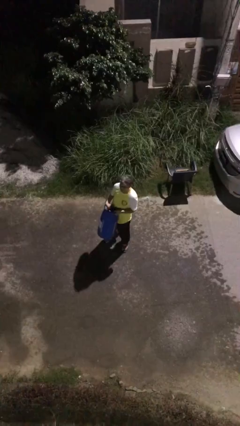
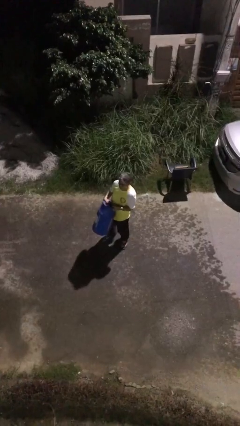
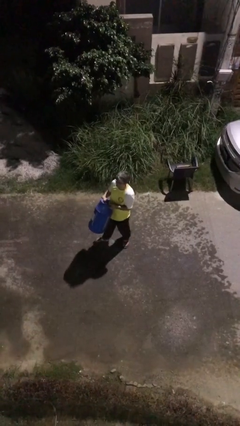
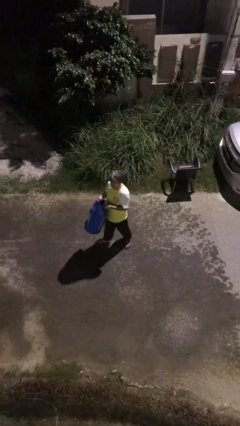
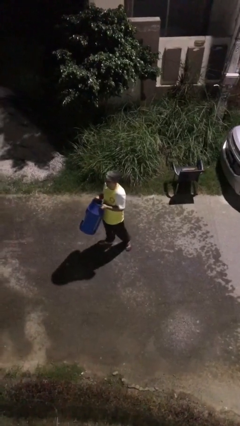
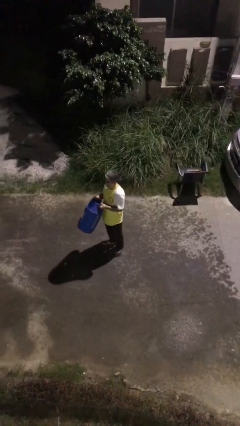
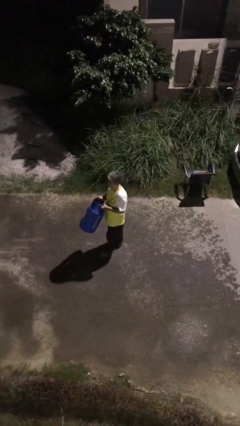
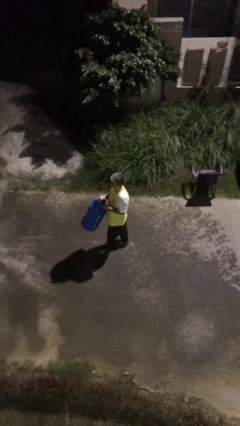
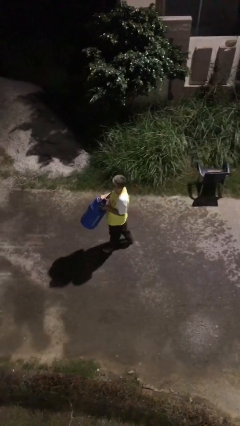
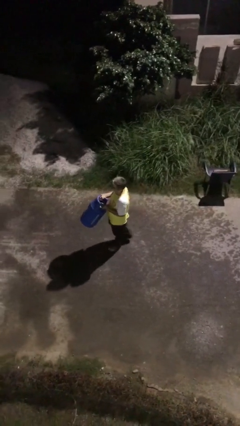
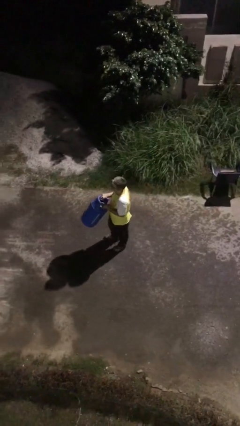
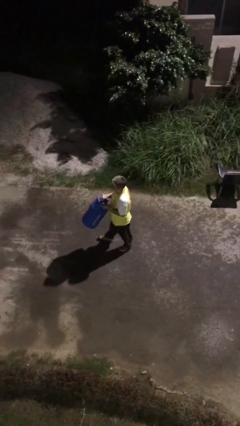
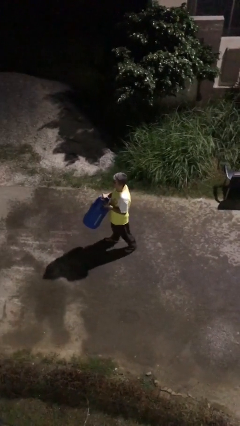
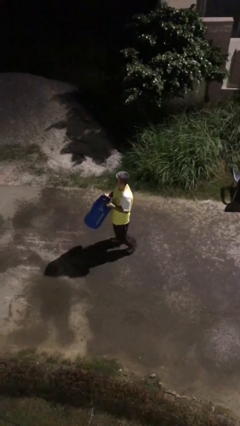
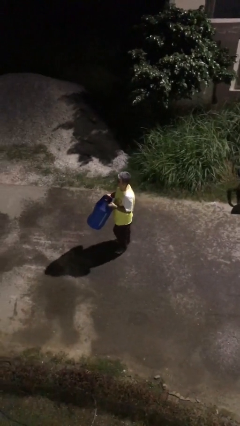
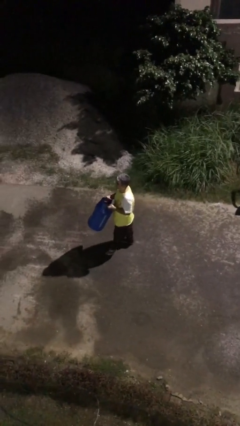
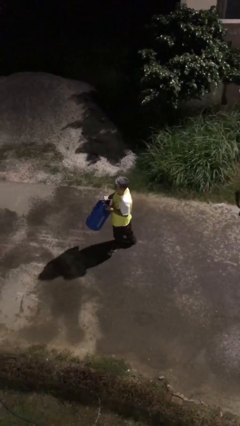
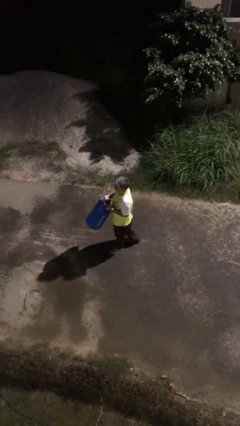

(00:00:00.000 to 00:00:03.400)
person carries heavy object

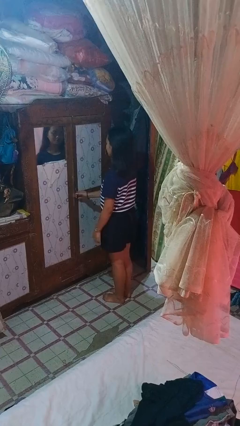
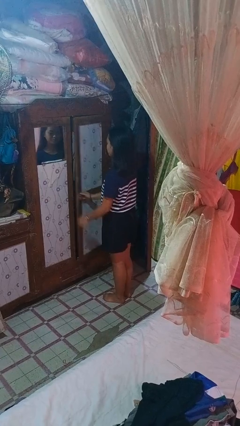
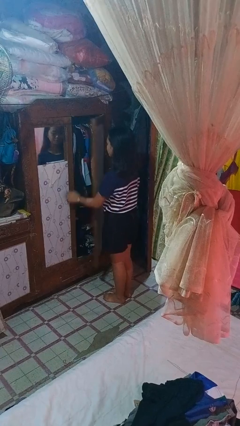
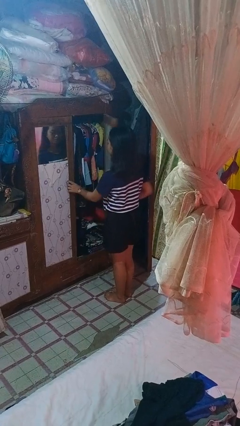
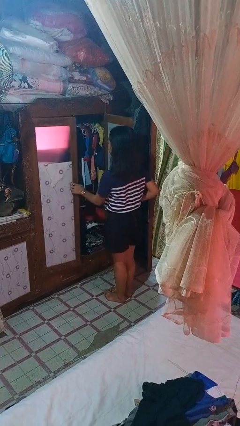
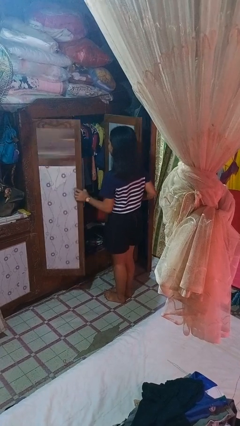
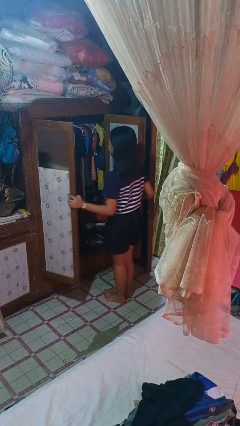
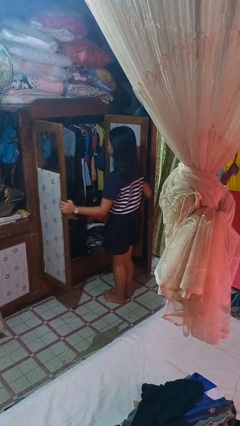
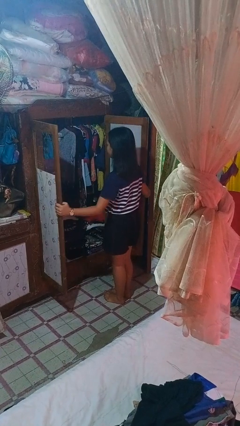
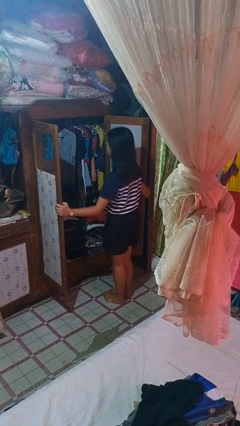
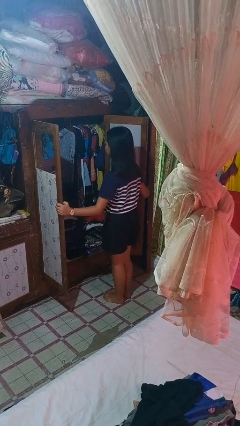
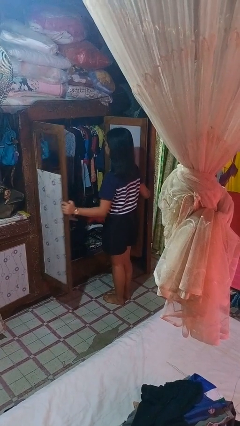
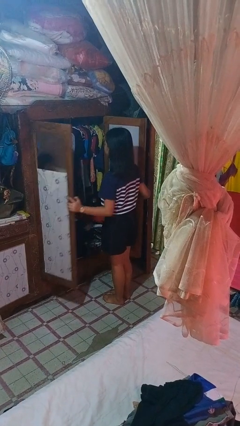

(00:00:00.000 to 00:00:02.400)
person opens closet door

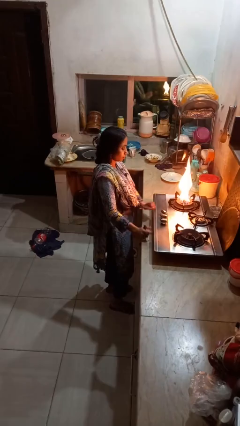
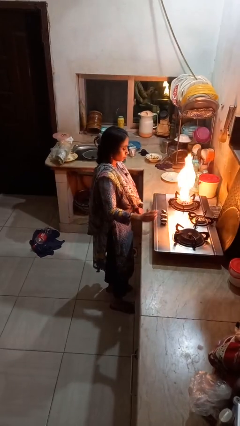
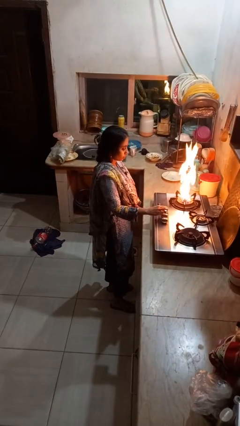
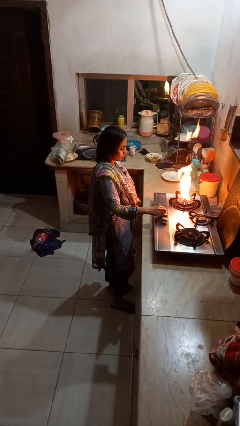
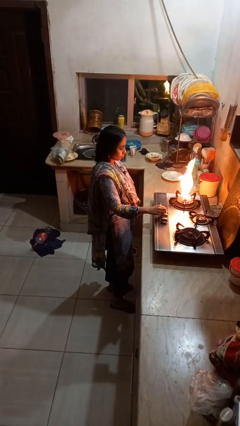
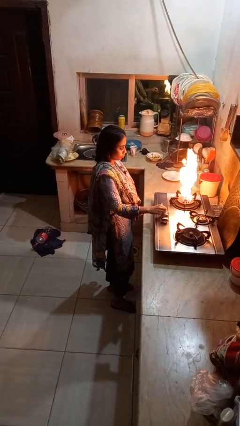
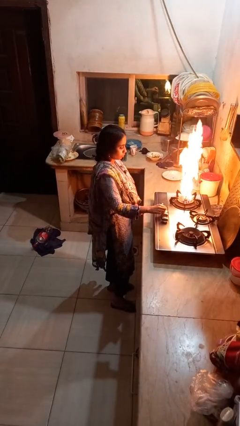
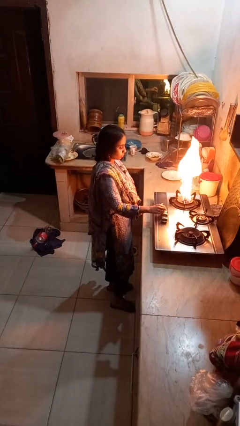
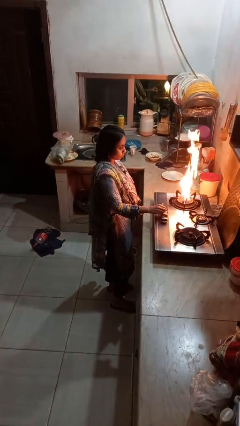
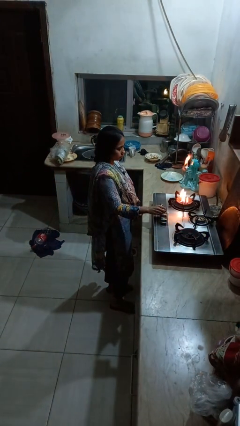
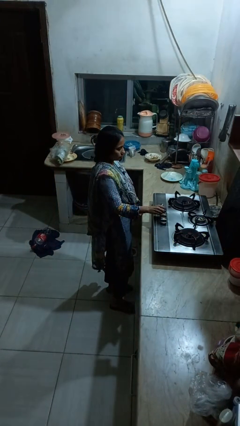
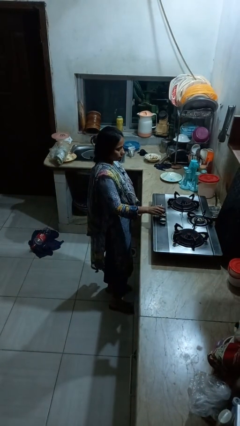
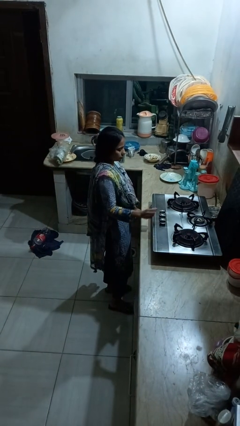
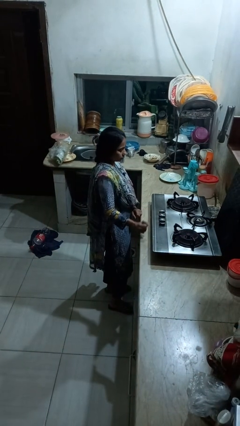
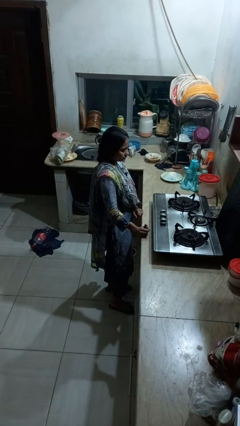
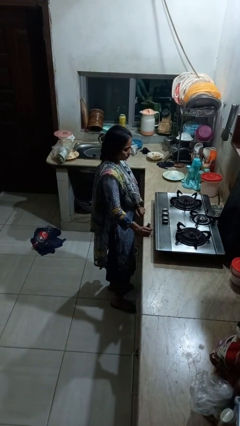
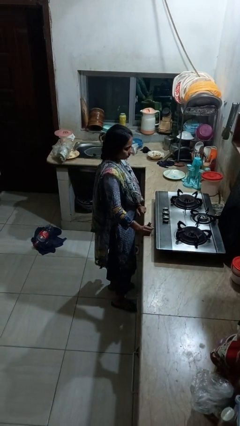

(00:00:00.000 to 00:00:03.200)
person turns off stovetop

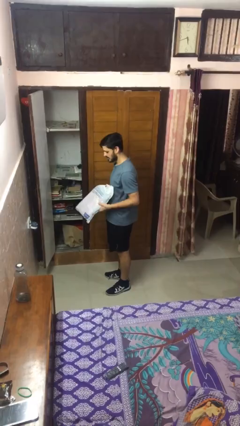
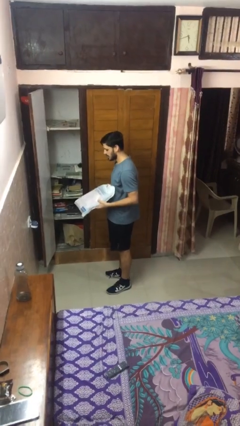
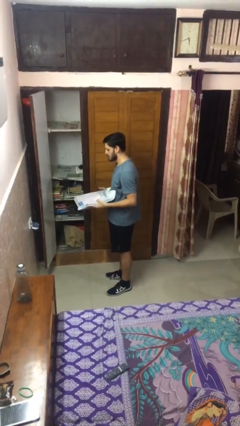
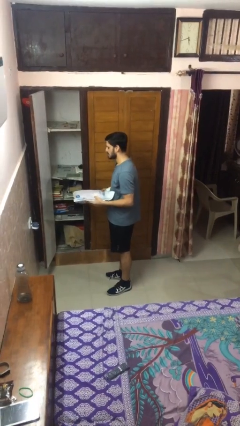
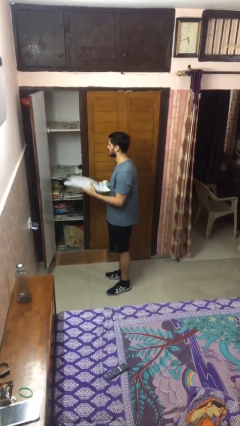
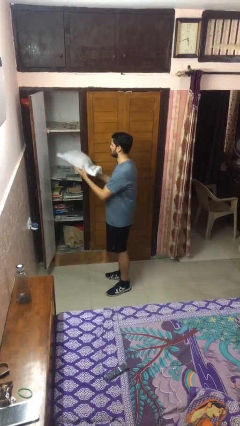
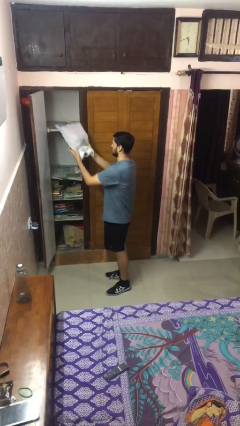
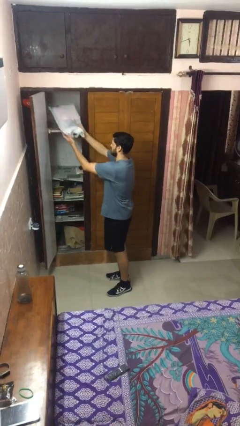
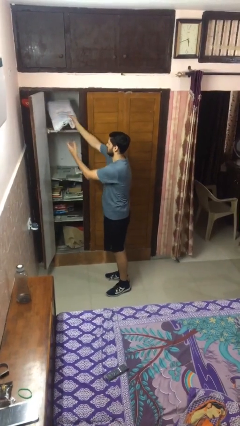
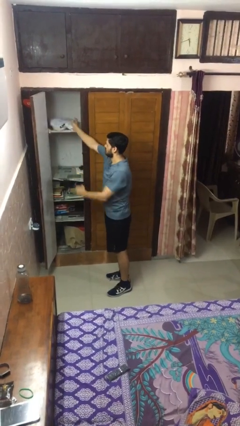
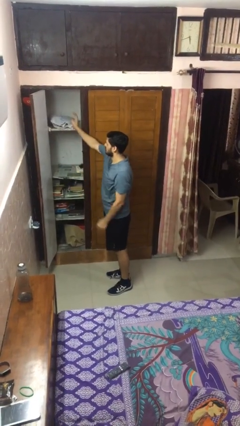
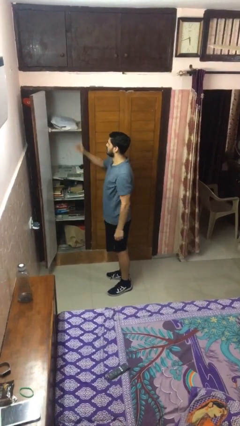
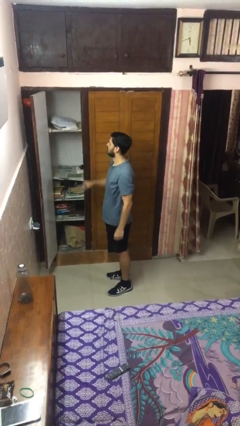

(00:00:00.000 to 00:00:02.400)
person puts down object on shelf

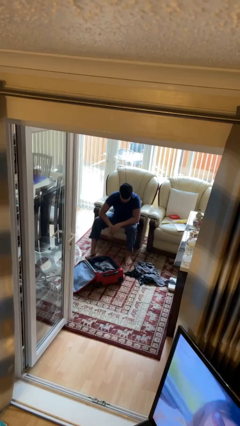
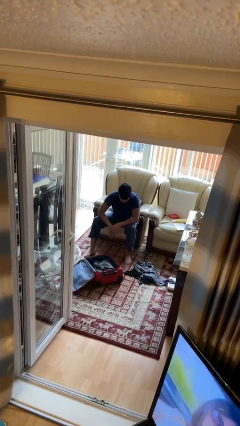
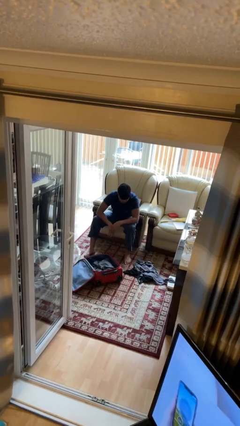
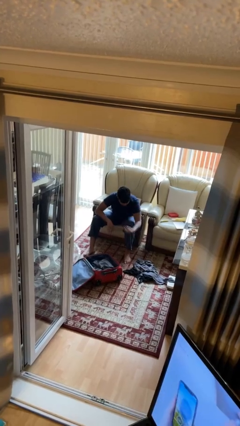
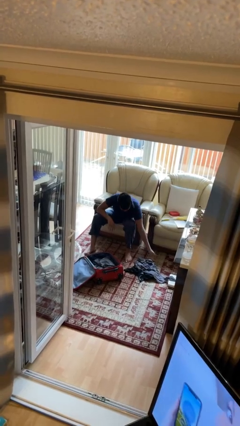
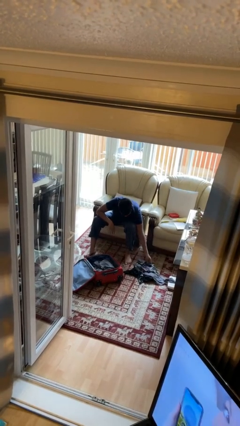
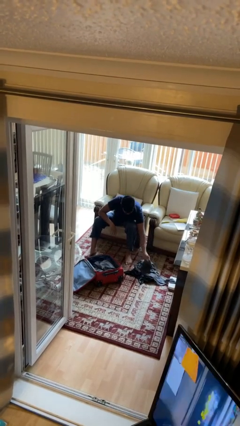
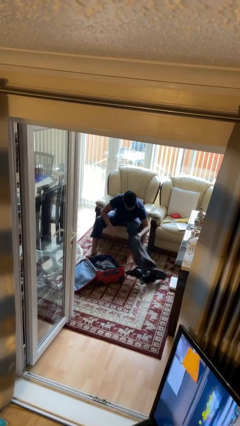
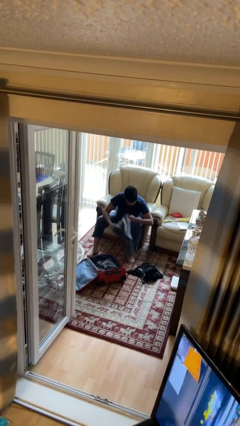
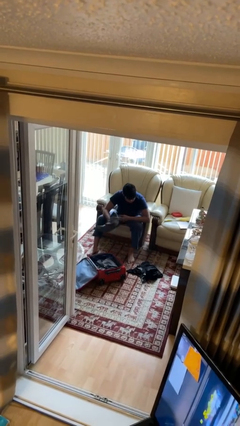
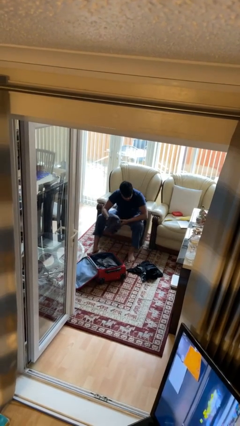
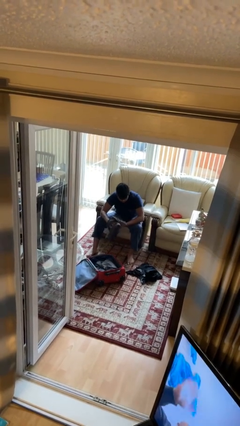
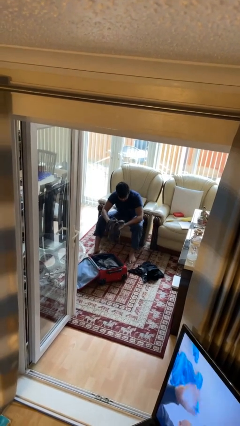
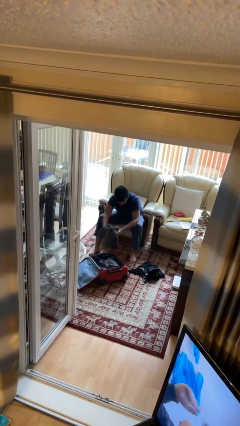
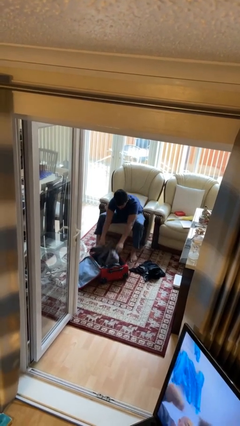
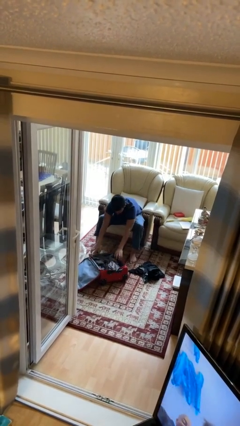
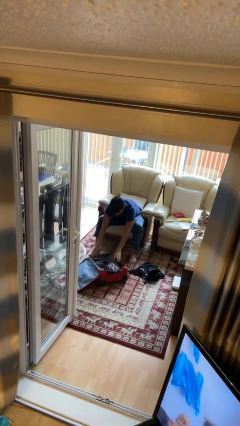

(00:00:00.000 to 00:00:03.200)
person loads clothes into suitcase

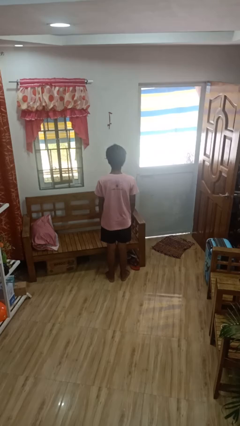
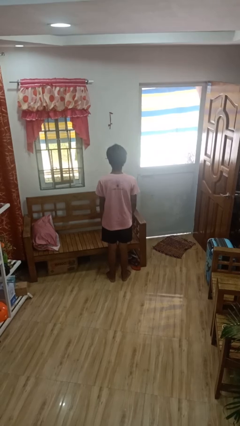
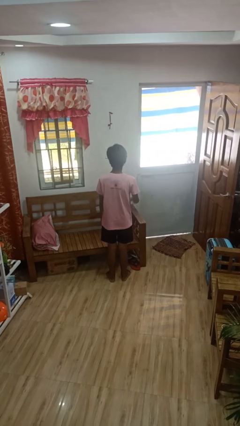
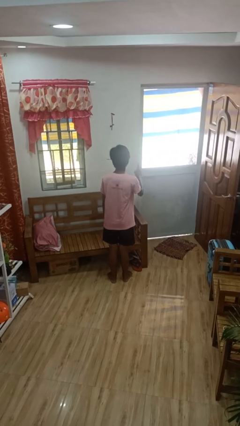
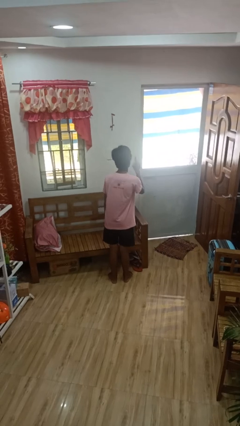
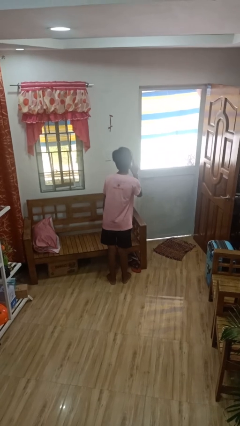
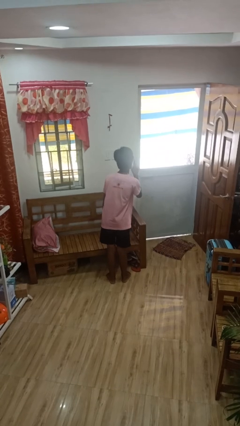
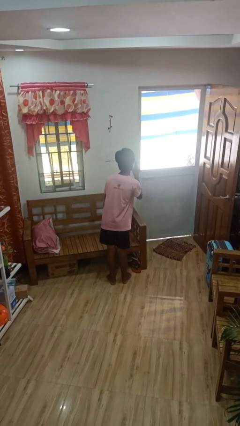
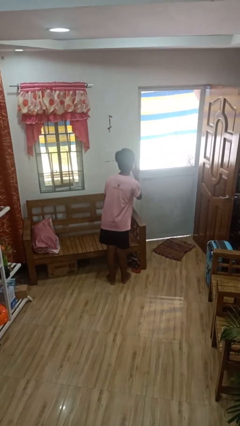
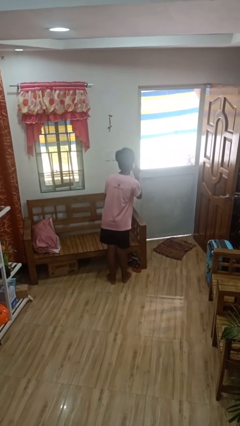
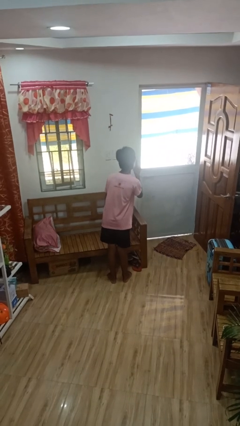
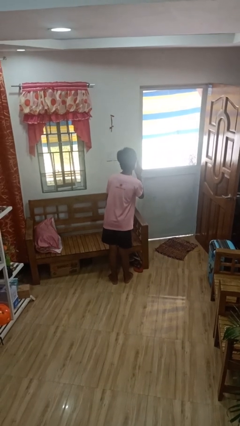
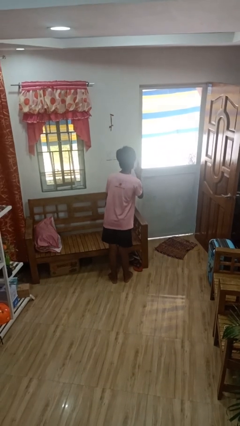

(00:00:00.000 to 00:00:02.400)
person gestures be quiet

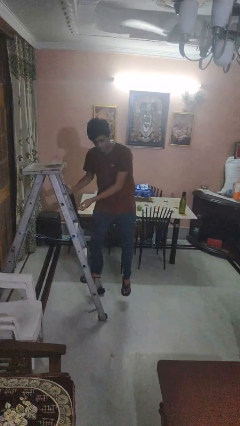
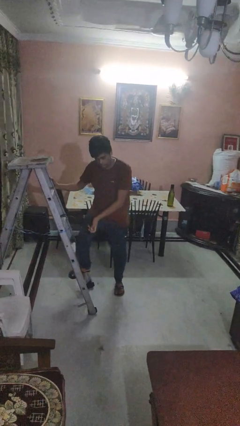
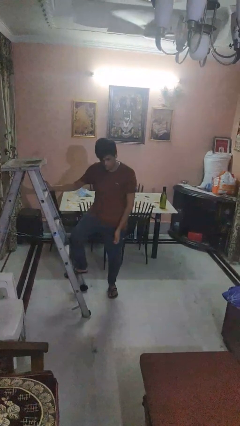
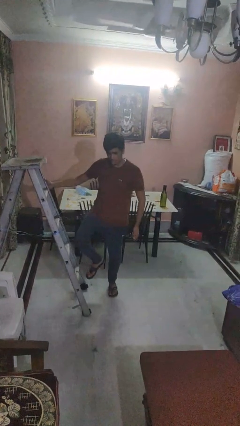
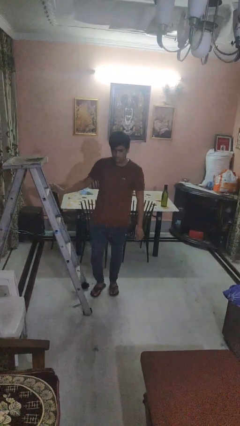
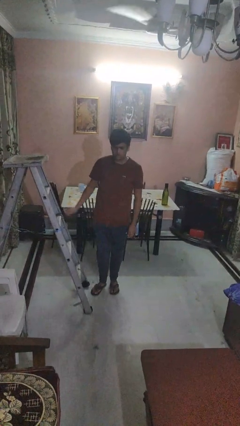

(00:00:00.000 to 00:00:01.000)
person climbs down ladder
